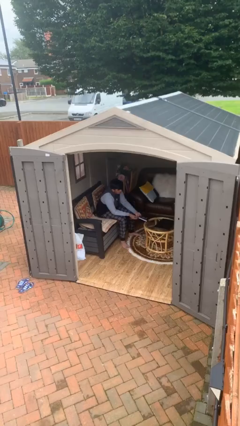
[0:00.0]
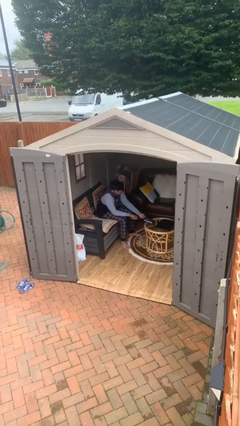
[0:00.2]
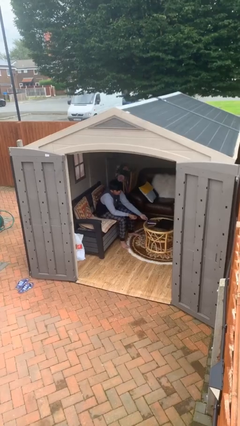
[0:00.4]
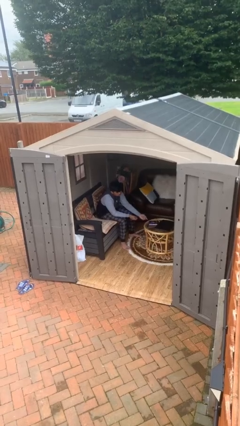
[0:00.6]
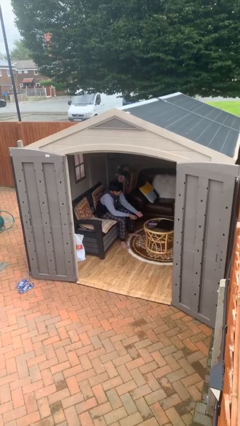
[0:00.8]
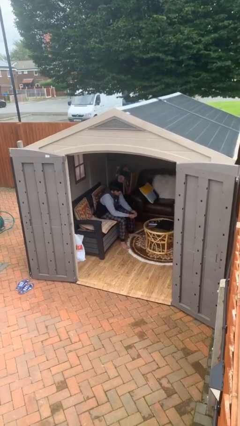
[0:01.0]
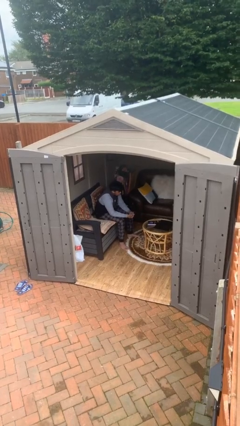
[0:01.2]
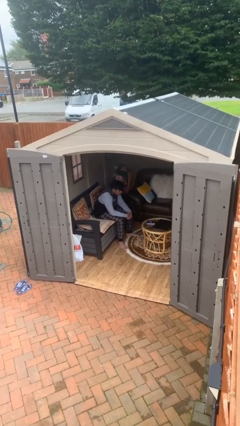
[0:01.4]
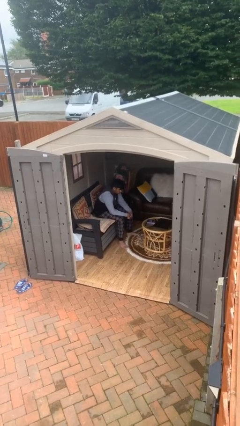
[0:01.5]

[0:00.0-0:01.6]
person puts down object on table

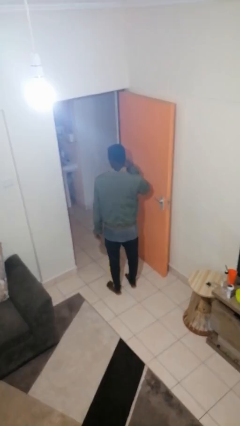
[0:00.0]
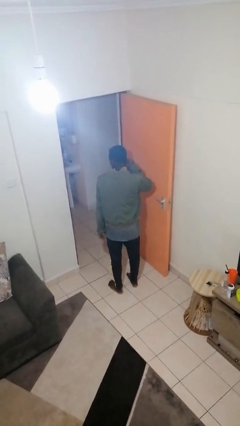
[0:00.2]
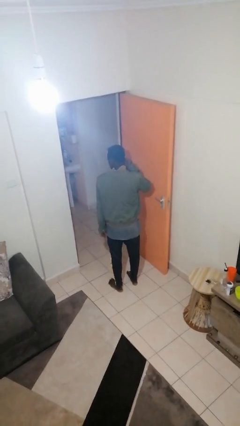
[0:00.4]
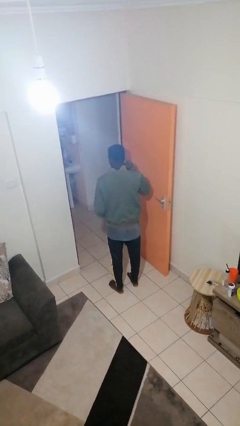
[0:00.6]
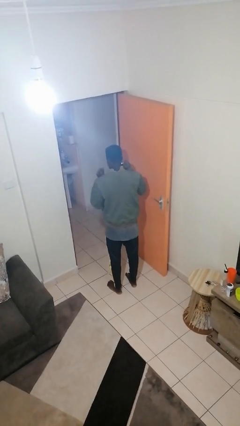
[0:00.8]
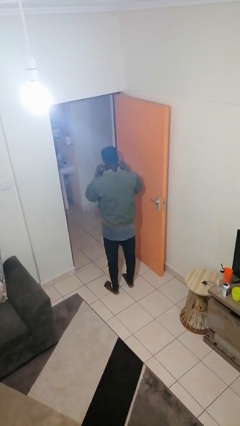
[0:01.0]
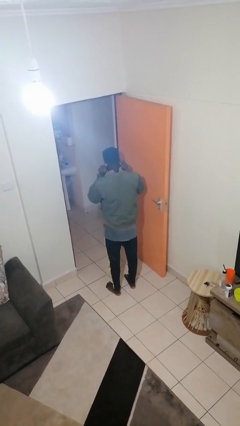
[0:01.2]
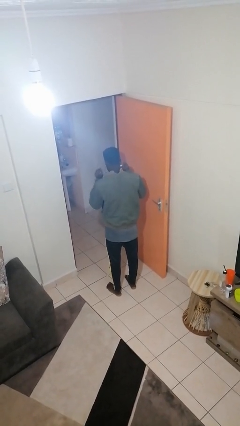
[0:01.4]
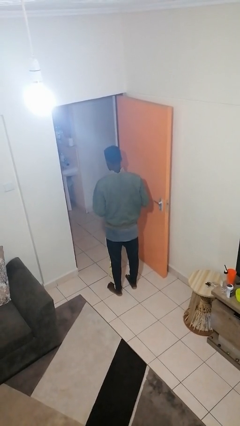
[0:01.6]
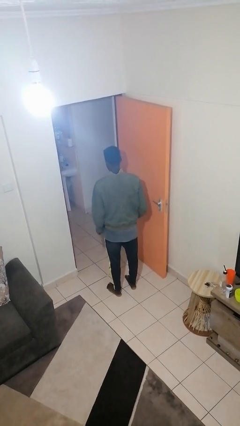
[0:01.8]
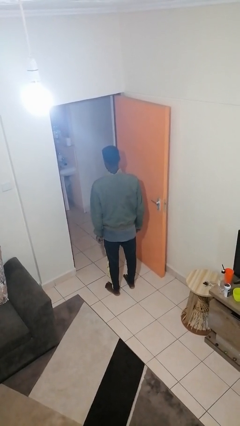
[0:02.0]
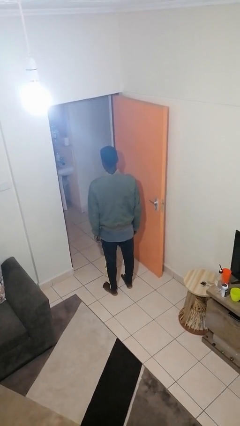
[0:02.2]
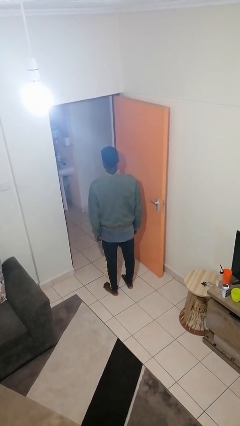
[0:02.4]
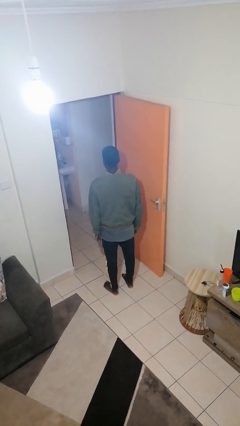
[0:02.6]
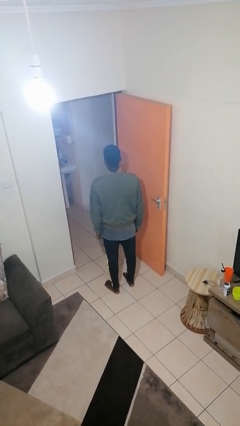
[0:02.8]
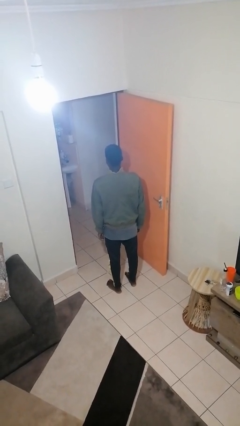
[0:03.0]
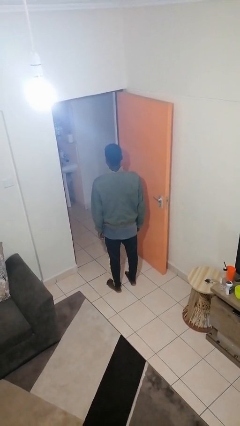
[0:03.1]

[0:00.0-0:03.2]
person puts on earrings

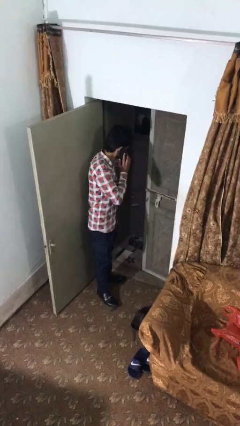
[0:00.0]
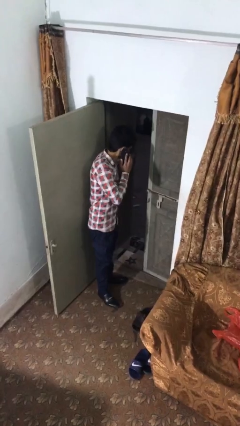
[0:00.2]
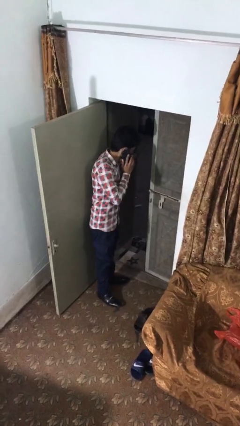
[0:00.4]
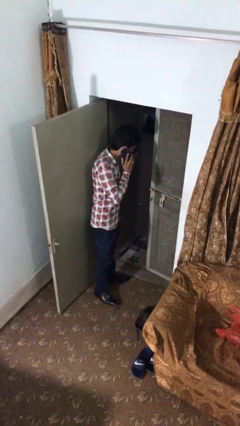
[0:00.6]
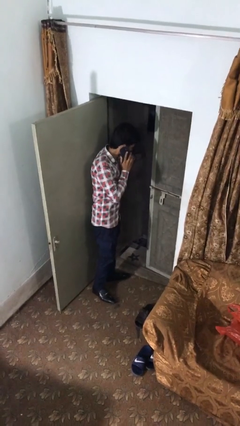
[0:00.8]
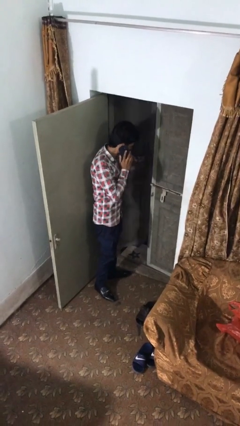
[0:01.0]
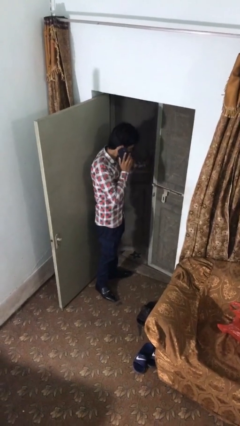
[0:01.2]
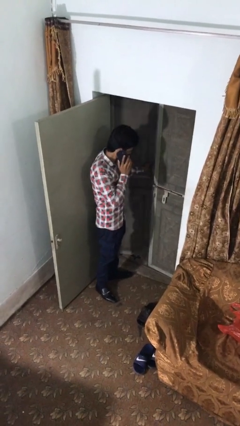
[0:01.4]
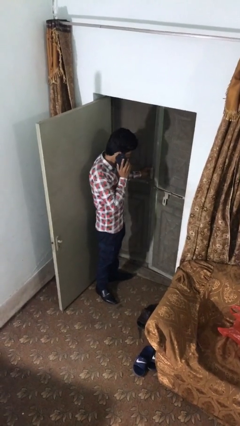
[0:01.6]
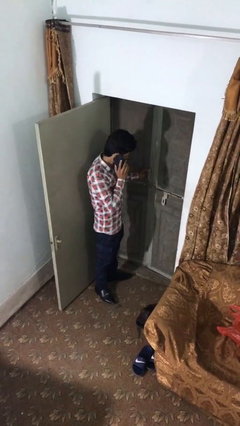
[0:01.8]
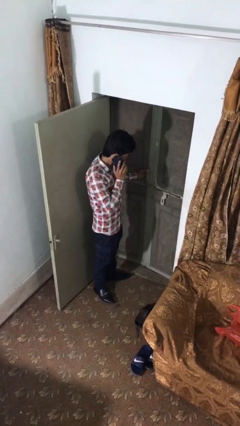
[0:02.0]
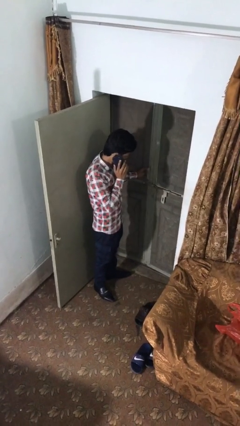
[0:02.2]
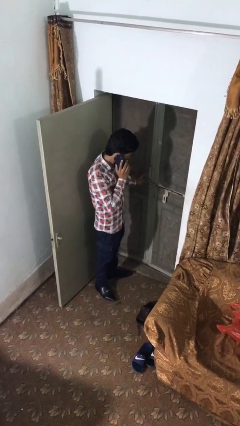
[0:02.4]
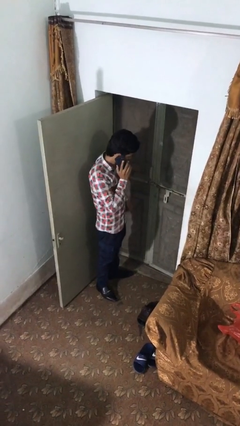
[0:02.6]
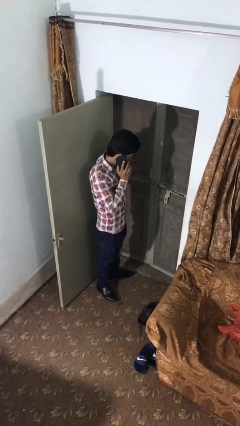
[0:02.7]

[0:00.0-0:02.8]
person closes facility door

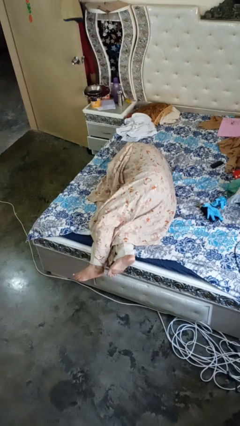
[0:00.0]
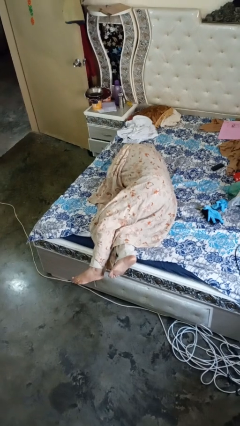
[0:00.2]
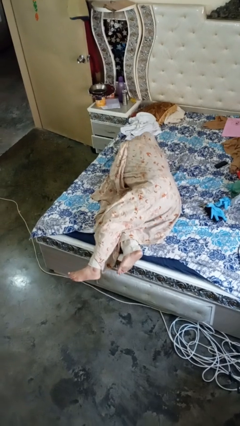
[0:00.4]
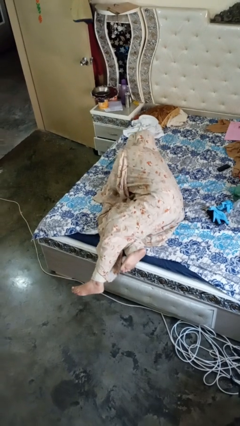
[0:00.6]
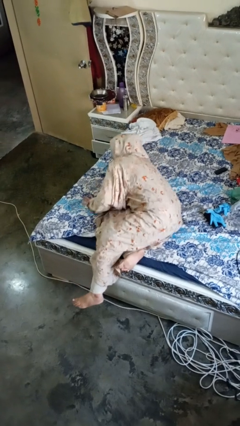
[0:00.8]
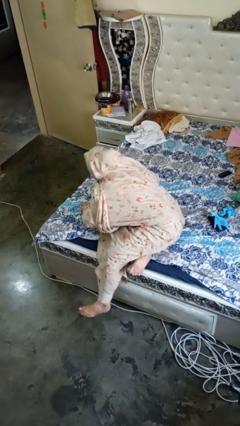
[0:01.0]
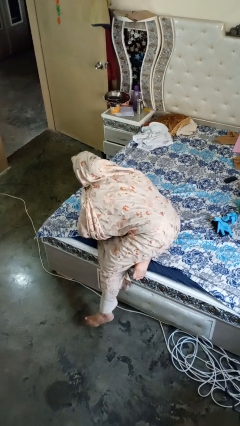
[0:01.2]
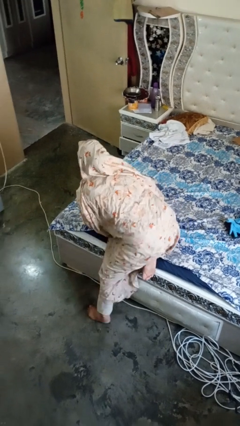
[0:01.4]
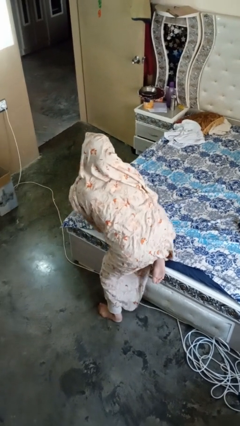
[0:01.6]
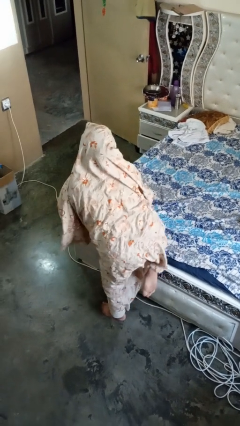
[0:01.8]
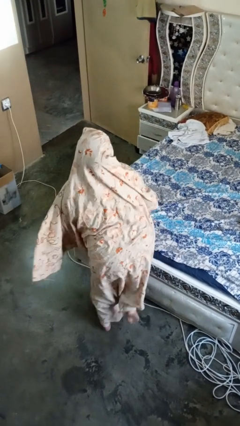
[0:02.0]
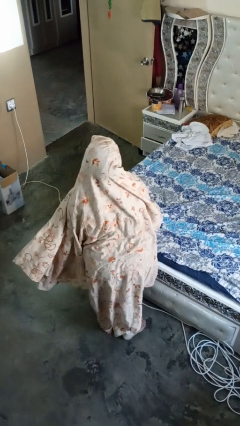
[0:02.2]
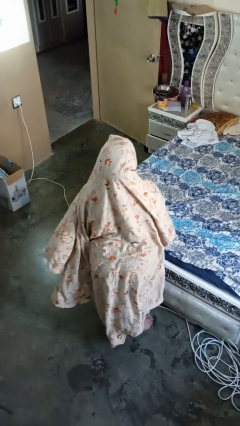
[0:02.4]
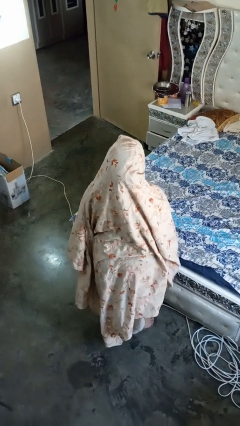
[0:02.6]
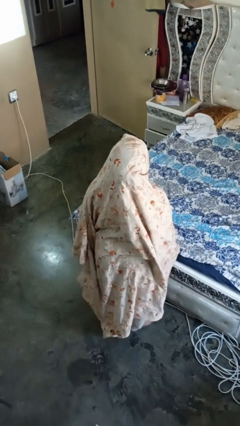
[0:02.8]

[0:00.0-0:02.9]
person stands up

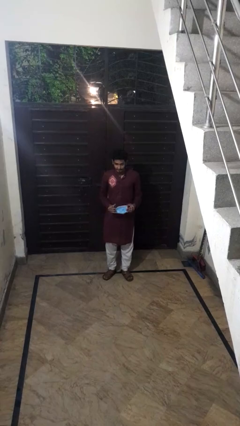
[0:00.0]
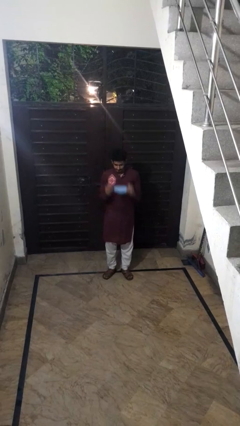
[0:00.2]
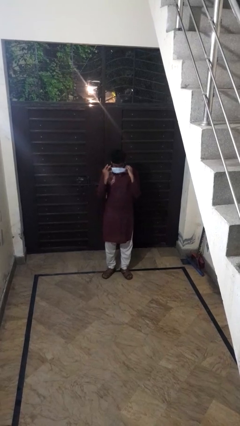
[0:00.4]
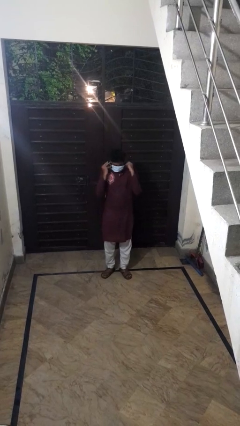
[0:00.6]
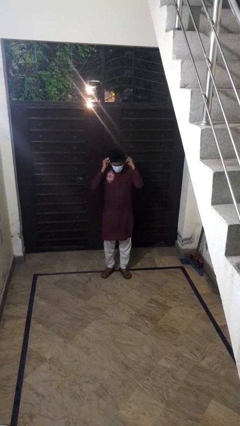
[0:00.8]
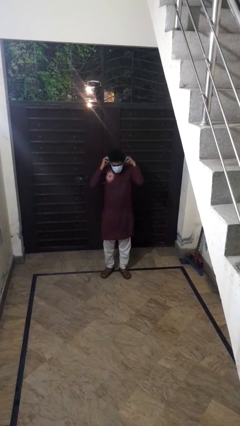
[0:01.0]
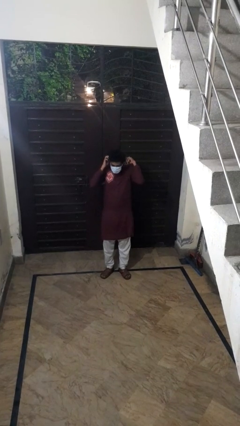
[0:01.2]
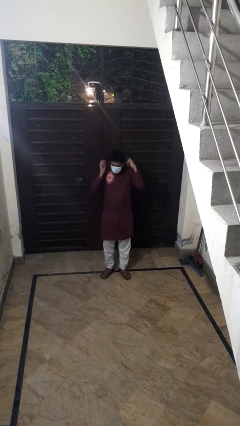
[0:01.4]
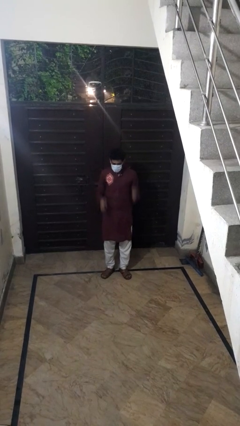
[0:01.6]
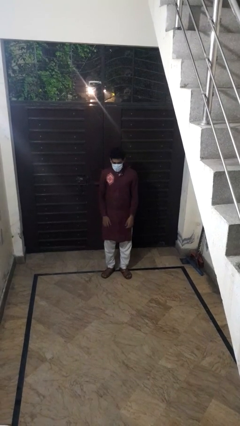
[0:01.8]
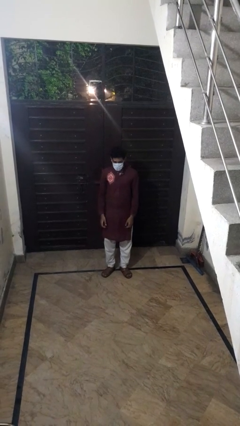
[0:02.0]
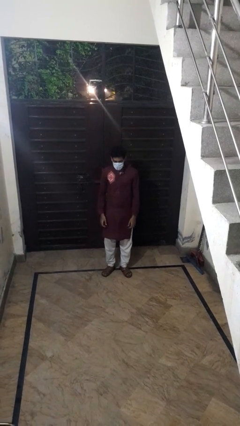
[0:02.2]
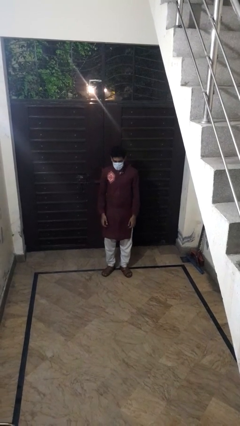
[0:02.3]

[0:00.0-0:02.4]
person puts on facemask

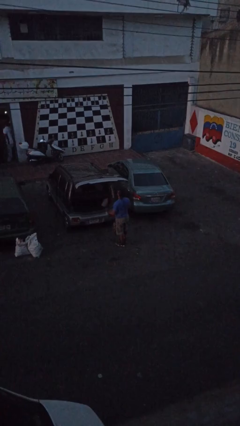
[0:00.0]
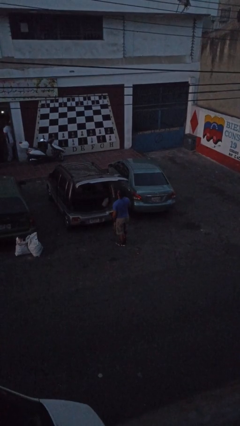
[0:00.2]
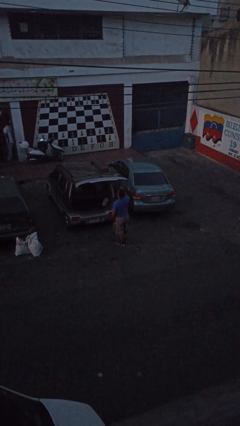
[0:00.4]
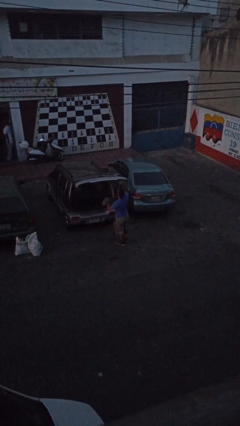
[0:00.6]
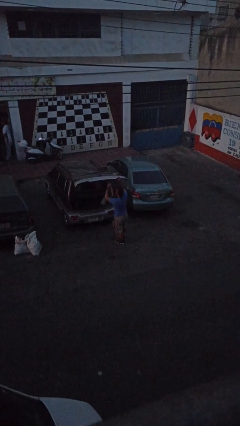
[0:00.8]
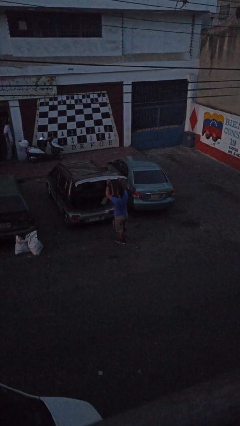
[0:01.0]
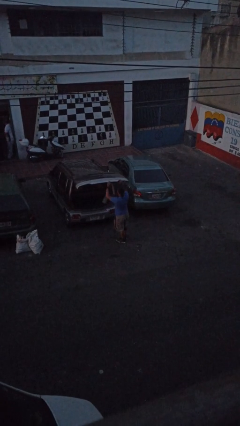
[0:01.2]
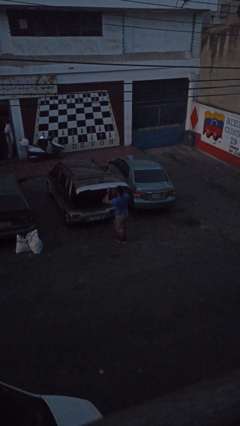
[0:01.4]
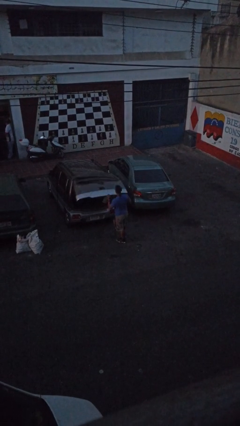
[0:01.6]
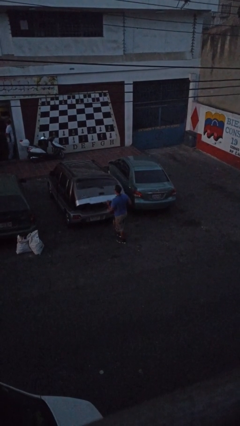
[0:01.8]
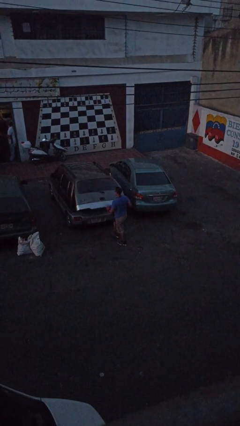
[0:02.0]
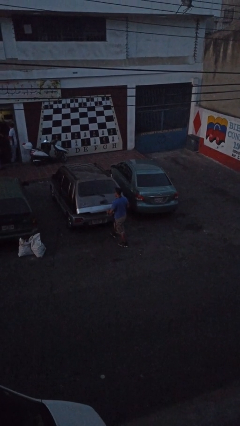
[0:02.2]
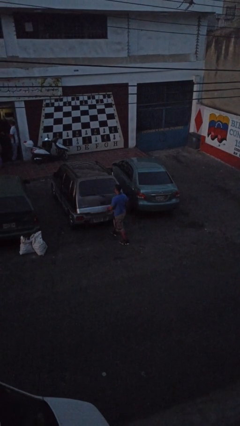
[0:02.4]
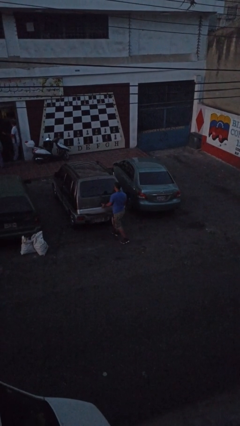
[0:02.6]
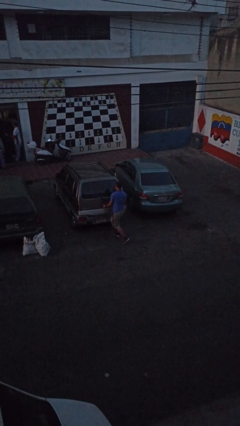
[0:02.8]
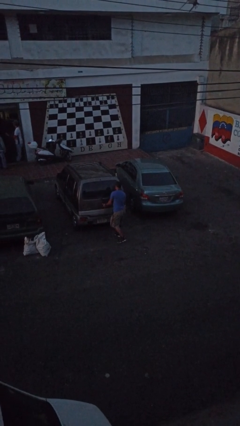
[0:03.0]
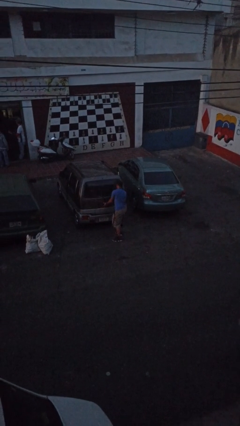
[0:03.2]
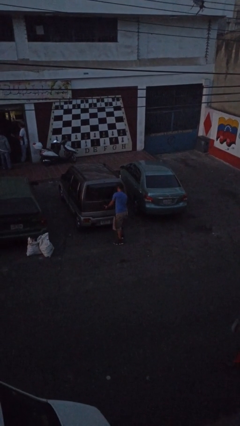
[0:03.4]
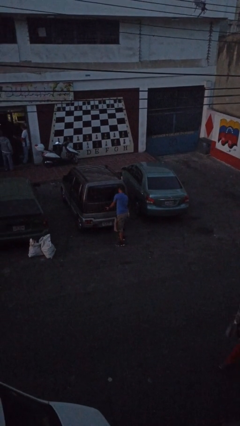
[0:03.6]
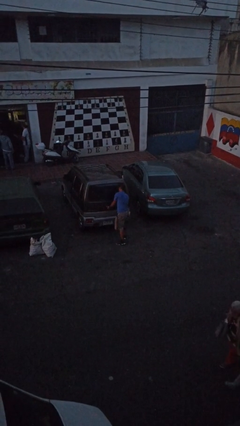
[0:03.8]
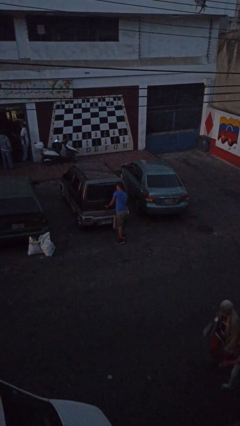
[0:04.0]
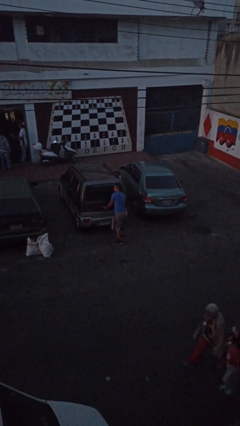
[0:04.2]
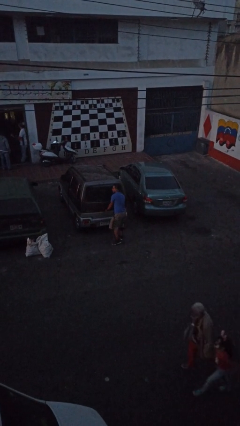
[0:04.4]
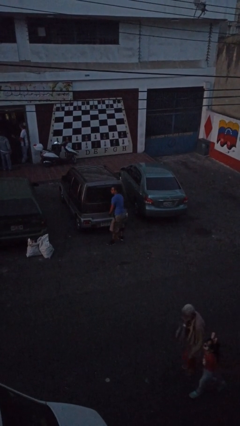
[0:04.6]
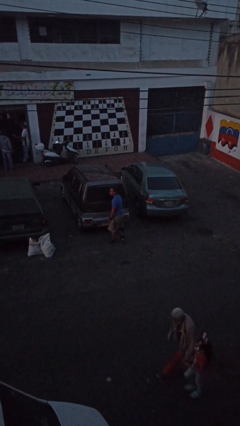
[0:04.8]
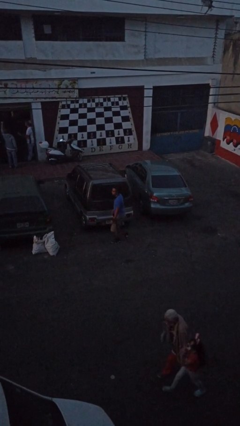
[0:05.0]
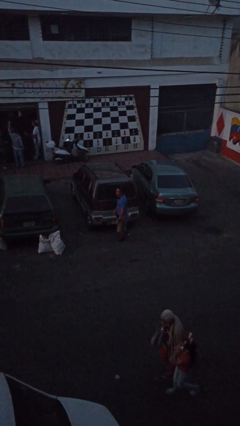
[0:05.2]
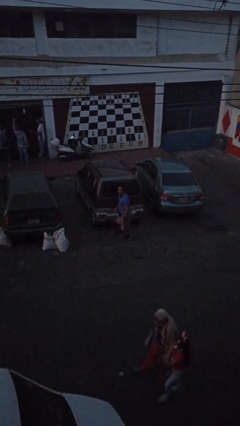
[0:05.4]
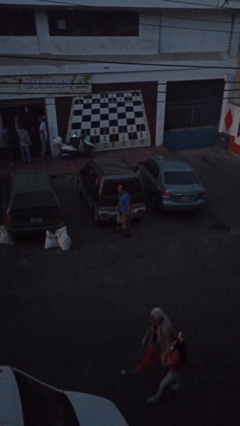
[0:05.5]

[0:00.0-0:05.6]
person closes car trunk
